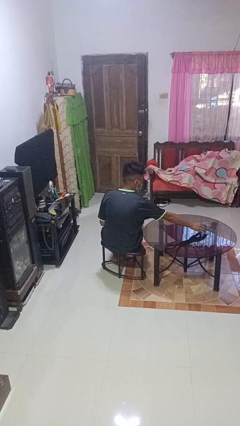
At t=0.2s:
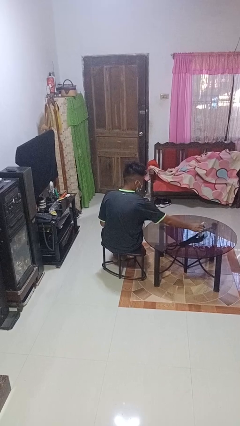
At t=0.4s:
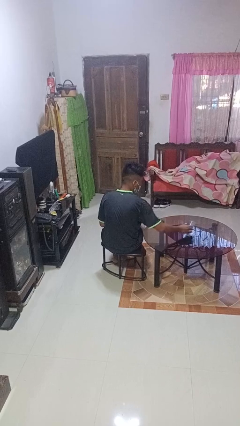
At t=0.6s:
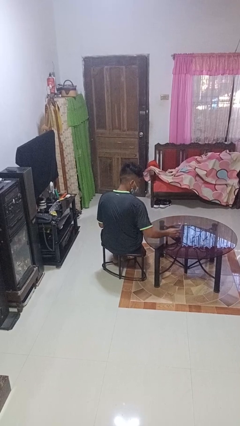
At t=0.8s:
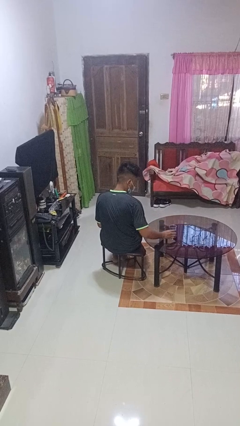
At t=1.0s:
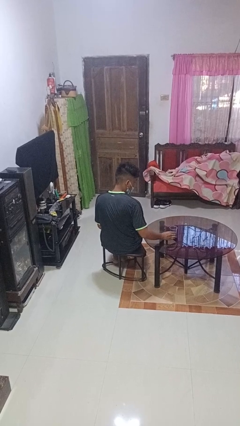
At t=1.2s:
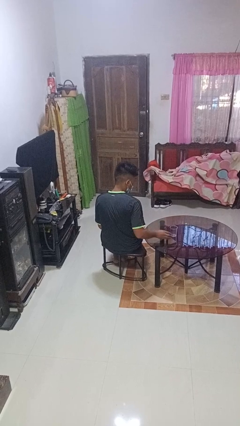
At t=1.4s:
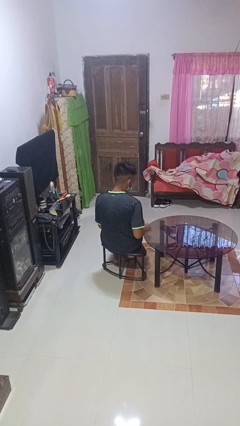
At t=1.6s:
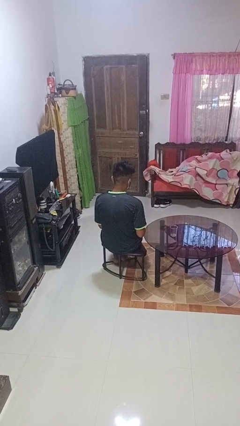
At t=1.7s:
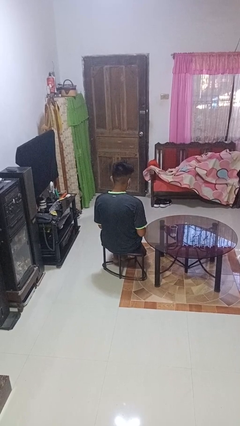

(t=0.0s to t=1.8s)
person sets upright glass

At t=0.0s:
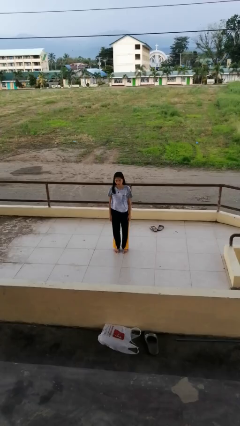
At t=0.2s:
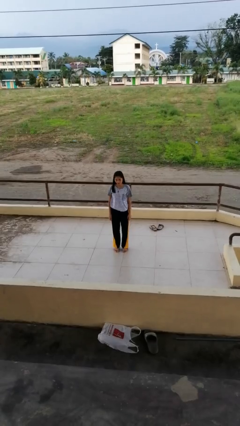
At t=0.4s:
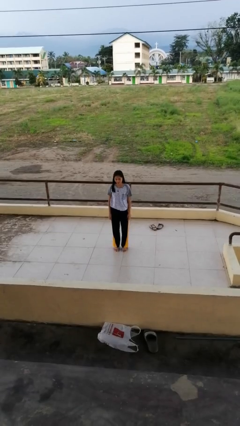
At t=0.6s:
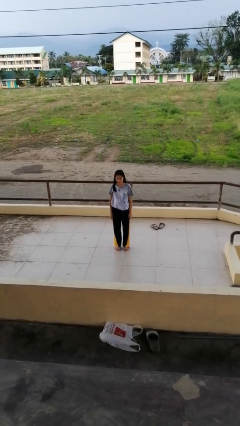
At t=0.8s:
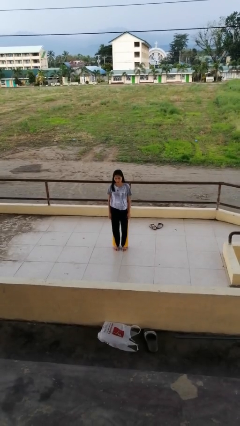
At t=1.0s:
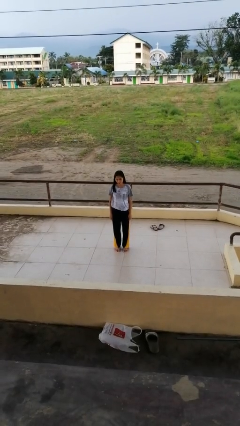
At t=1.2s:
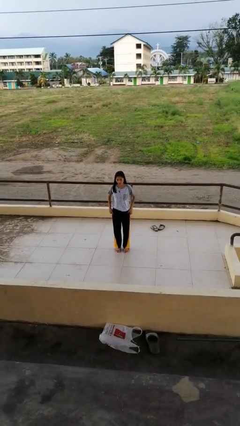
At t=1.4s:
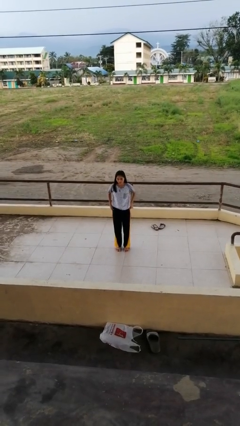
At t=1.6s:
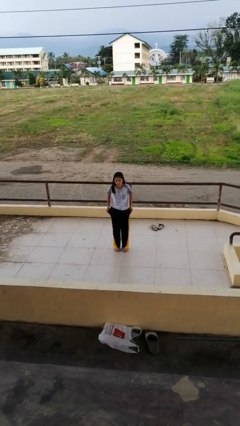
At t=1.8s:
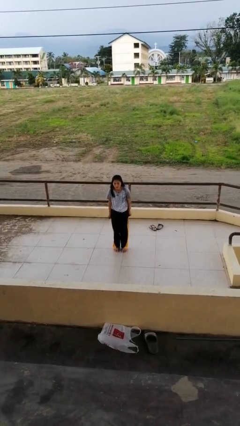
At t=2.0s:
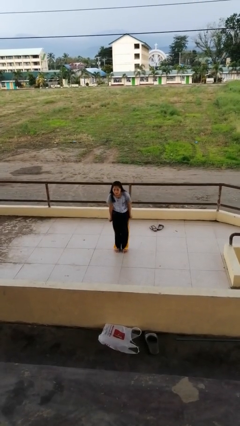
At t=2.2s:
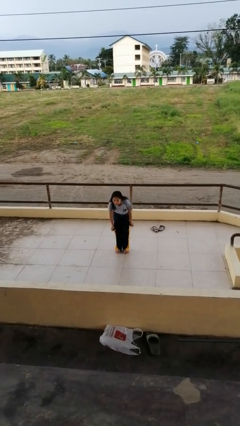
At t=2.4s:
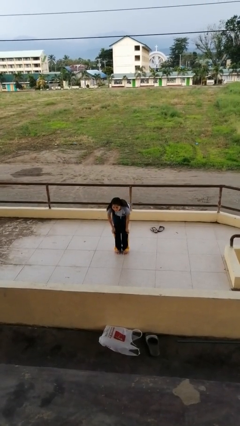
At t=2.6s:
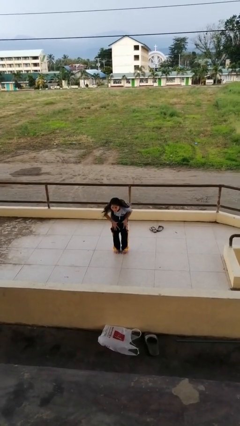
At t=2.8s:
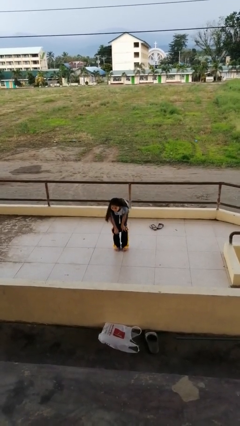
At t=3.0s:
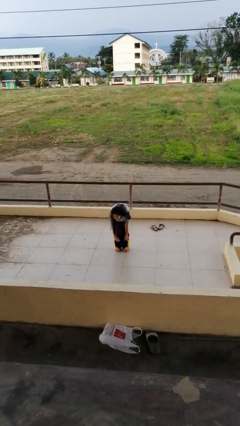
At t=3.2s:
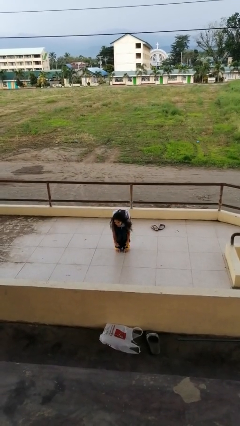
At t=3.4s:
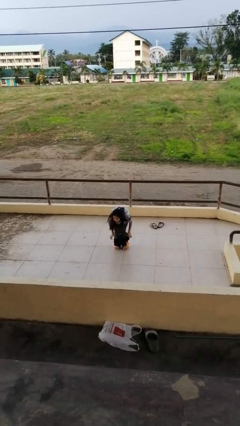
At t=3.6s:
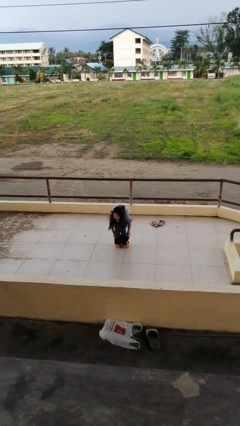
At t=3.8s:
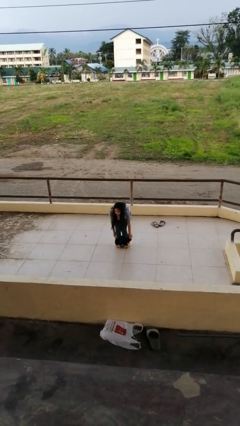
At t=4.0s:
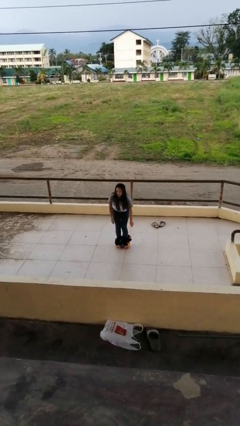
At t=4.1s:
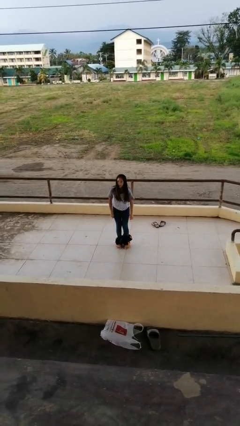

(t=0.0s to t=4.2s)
person takes off pants

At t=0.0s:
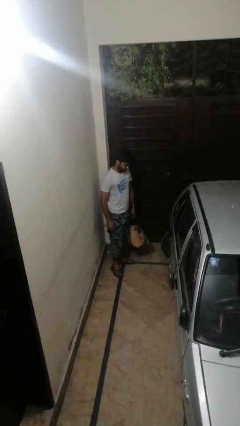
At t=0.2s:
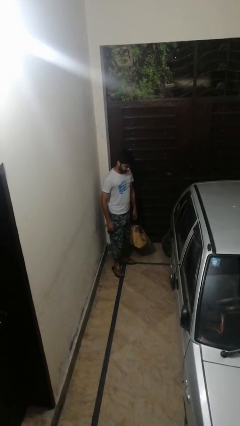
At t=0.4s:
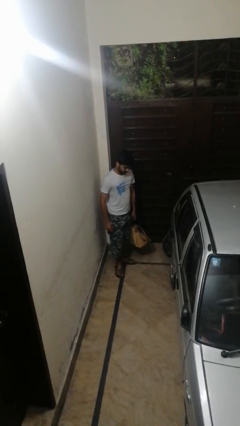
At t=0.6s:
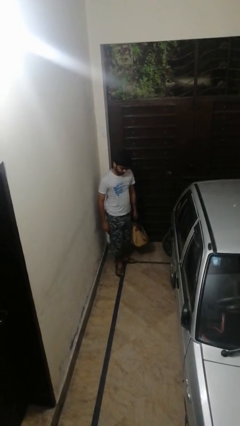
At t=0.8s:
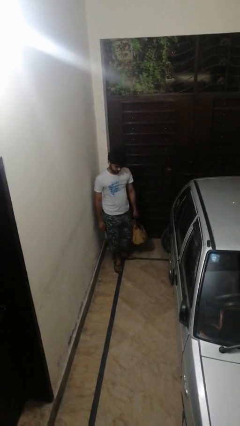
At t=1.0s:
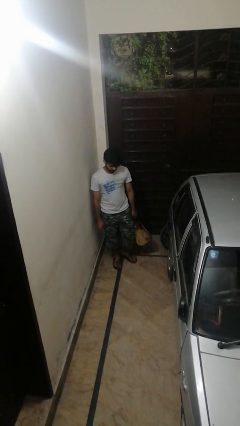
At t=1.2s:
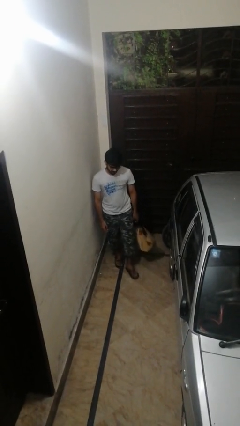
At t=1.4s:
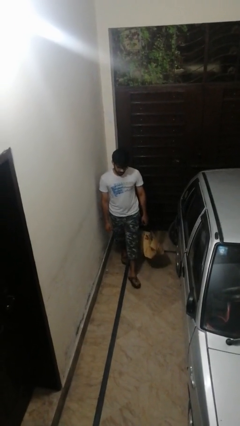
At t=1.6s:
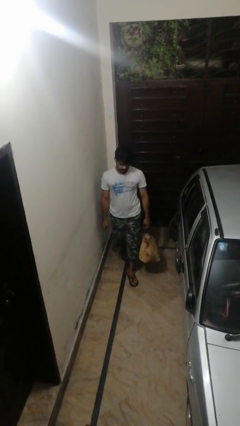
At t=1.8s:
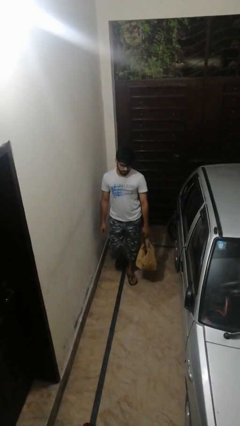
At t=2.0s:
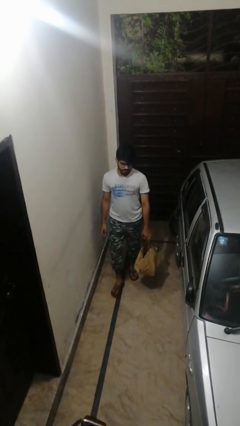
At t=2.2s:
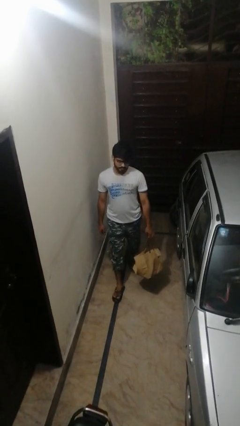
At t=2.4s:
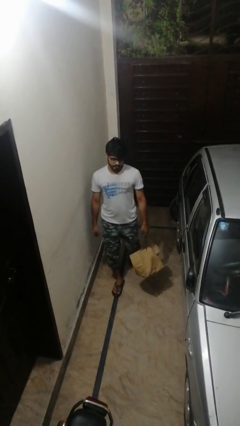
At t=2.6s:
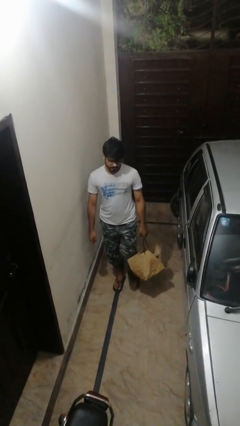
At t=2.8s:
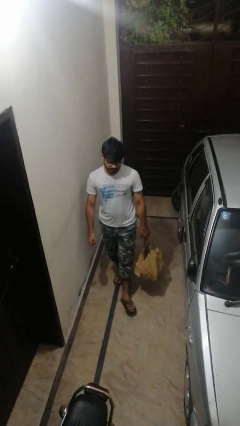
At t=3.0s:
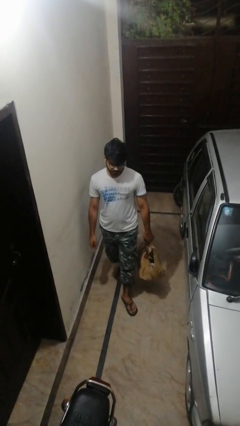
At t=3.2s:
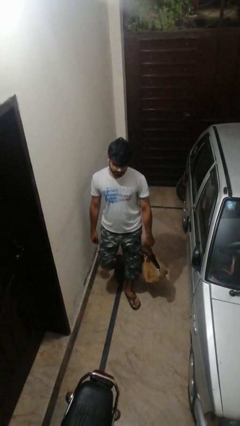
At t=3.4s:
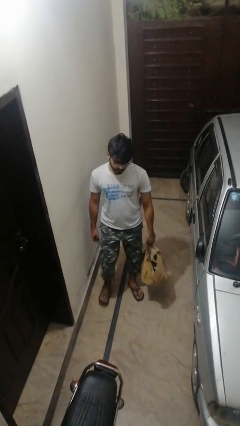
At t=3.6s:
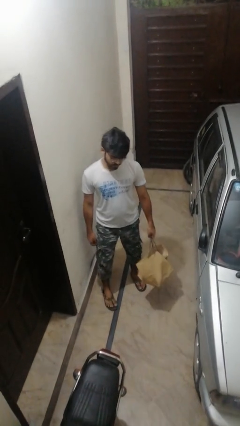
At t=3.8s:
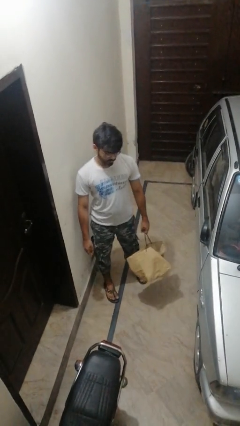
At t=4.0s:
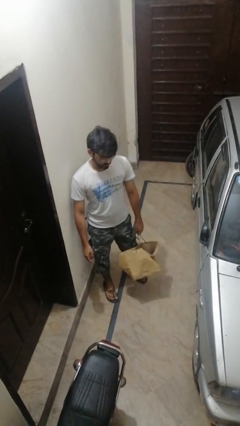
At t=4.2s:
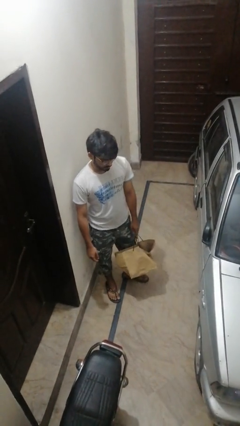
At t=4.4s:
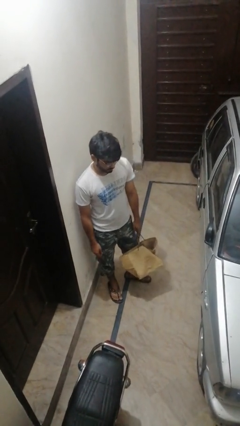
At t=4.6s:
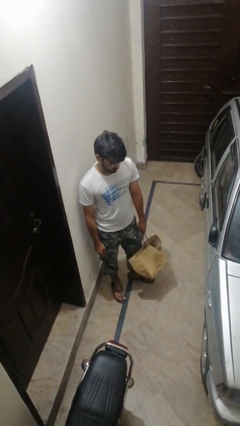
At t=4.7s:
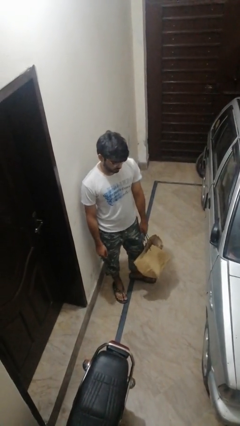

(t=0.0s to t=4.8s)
person carries groceries

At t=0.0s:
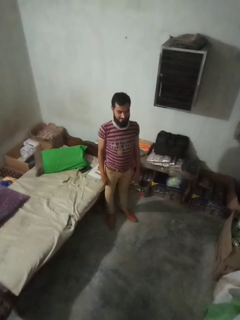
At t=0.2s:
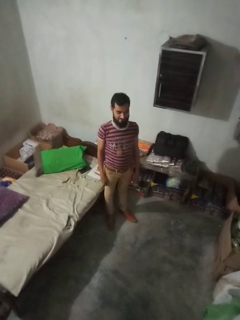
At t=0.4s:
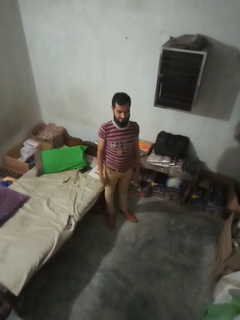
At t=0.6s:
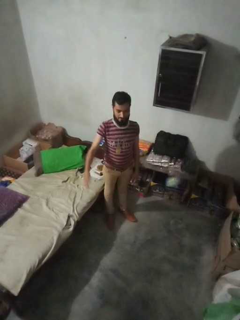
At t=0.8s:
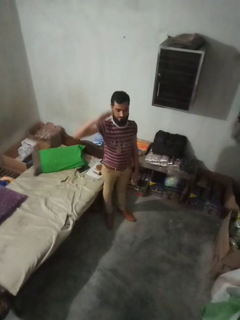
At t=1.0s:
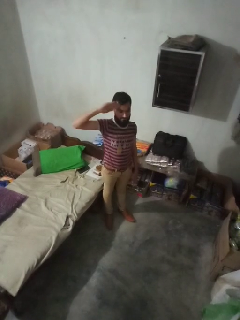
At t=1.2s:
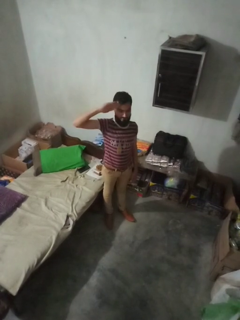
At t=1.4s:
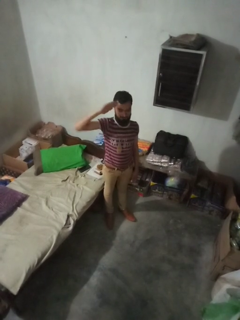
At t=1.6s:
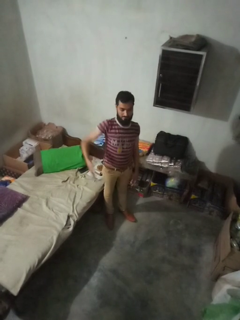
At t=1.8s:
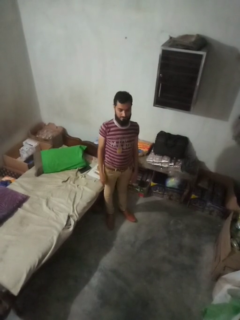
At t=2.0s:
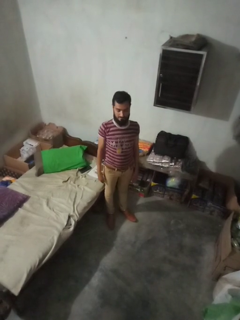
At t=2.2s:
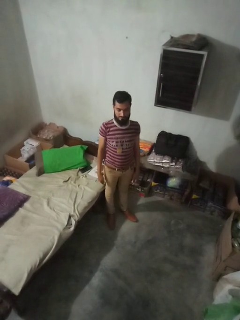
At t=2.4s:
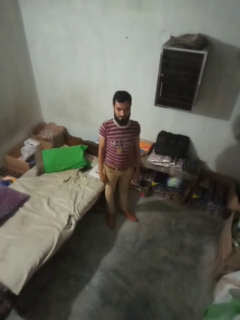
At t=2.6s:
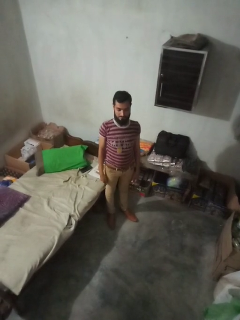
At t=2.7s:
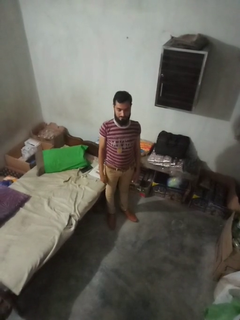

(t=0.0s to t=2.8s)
person salutes

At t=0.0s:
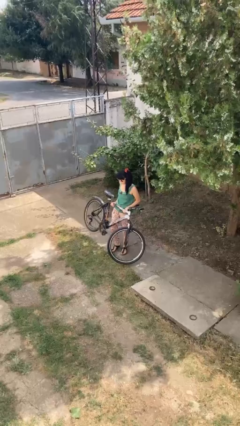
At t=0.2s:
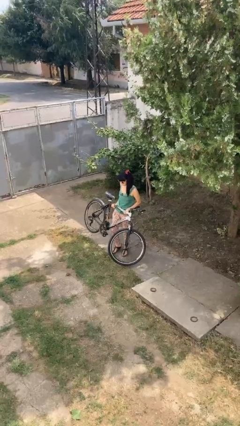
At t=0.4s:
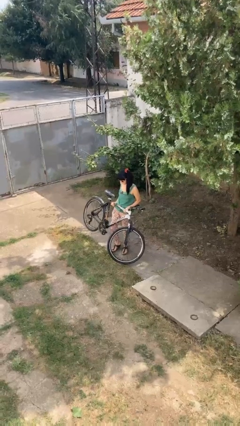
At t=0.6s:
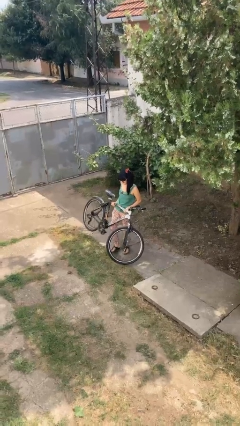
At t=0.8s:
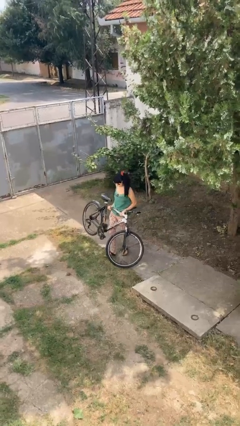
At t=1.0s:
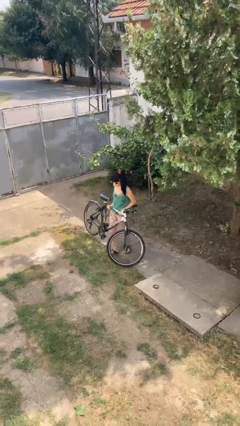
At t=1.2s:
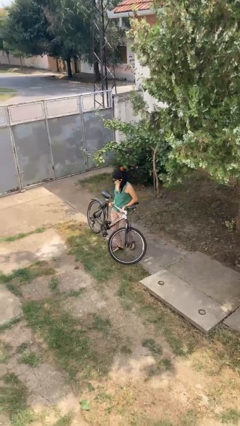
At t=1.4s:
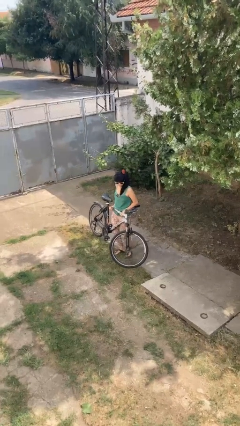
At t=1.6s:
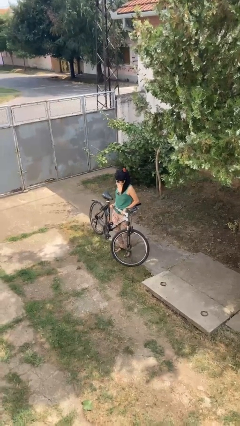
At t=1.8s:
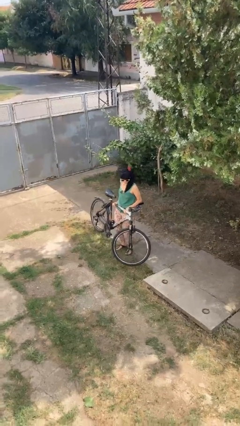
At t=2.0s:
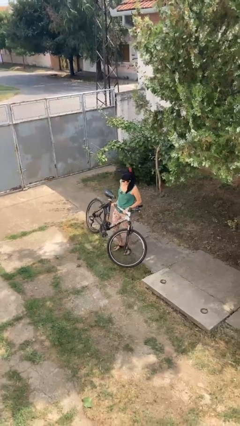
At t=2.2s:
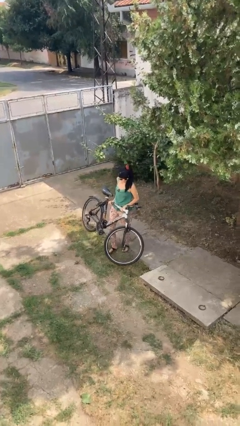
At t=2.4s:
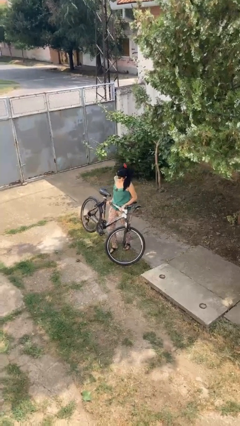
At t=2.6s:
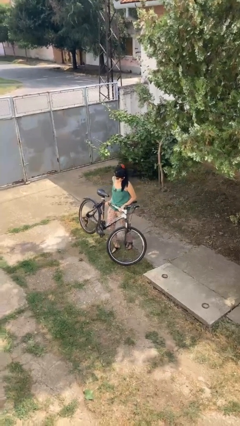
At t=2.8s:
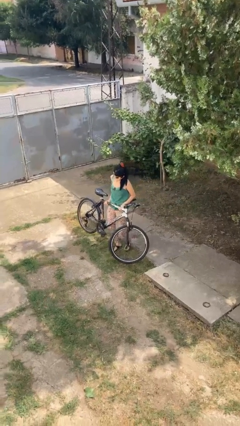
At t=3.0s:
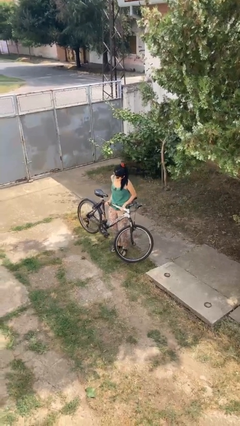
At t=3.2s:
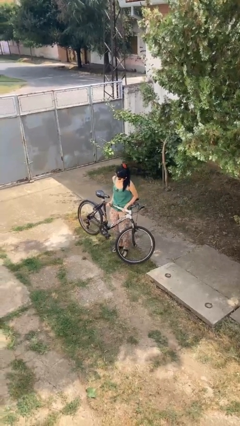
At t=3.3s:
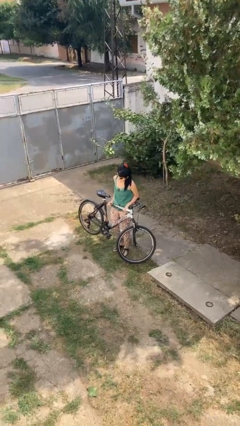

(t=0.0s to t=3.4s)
person carries bicycle

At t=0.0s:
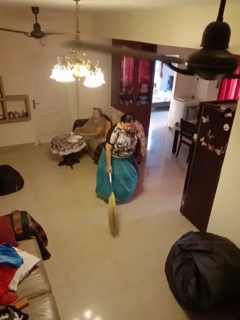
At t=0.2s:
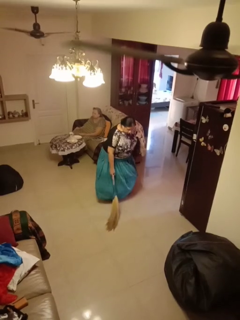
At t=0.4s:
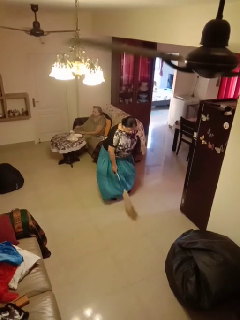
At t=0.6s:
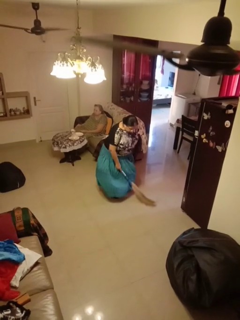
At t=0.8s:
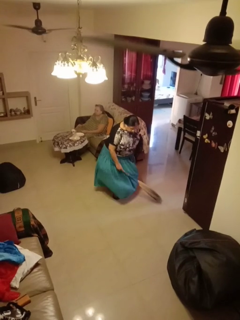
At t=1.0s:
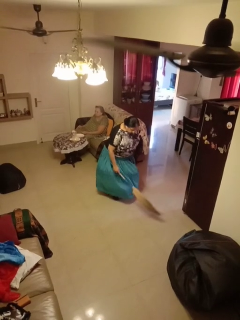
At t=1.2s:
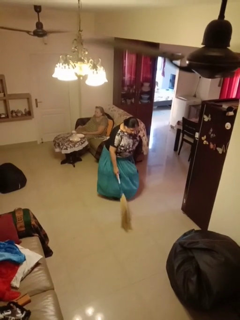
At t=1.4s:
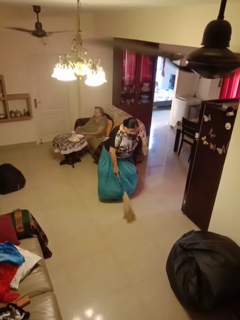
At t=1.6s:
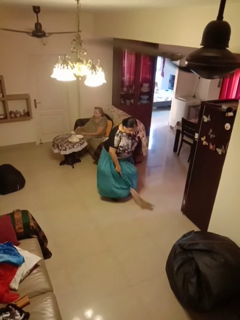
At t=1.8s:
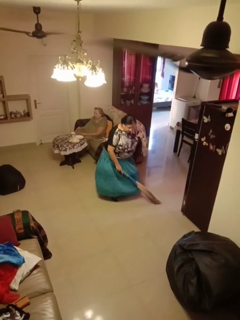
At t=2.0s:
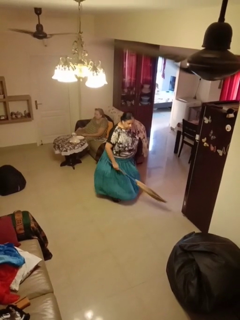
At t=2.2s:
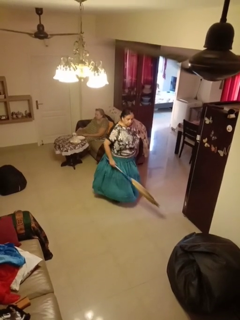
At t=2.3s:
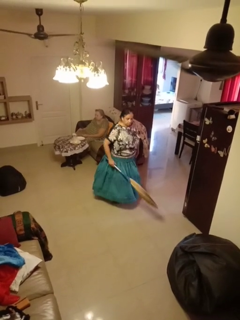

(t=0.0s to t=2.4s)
person sweeps floor
